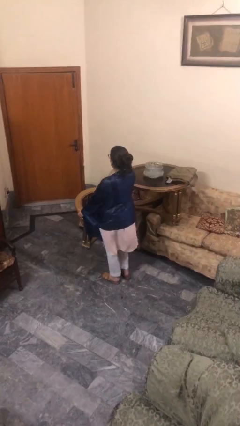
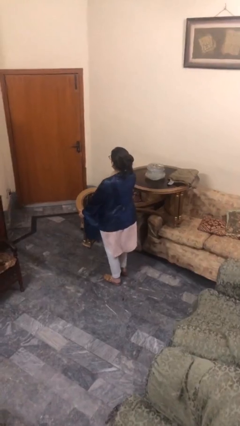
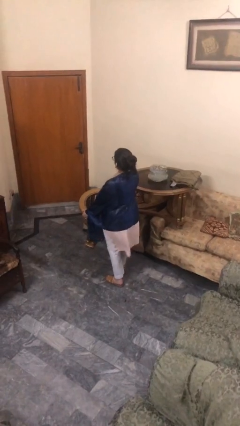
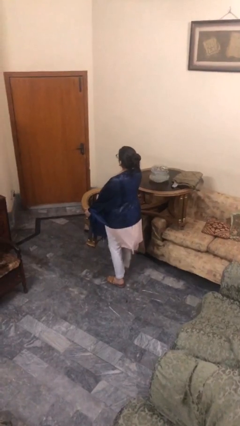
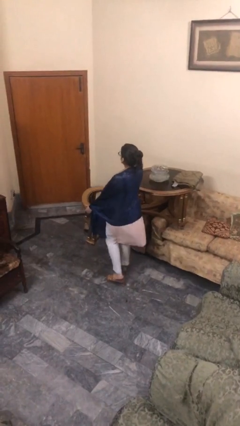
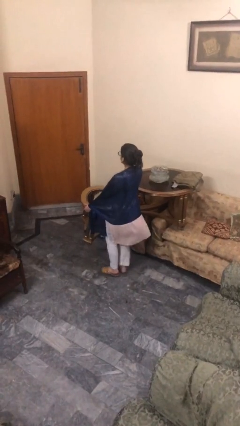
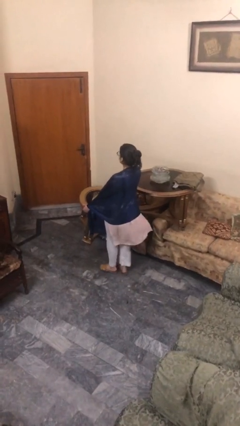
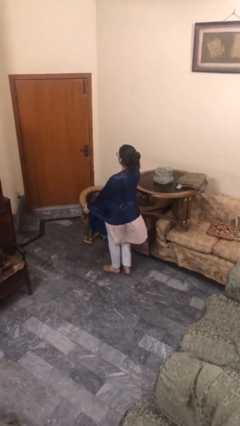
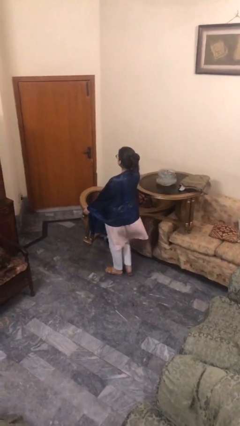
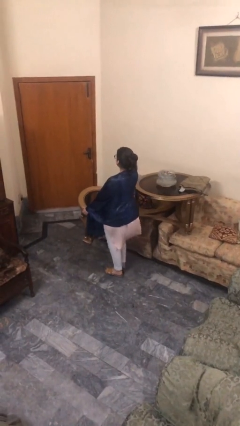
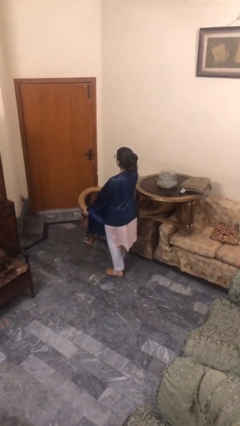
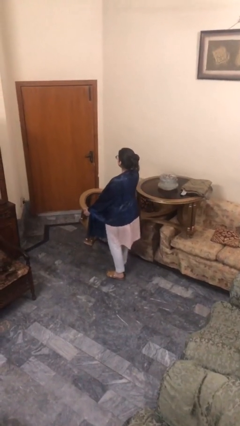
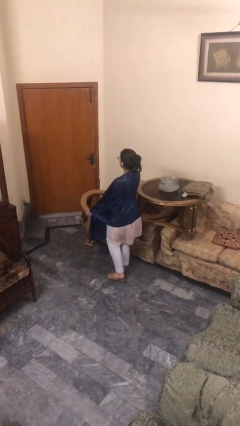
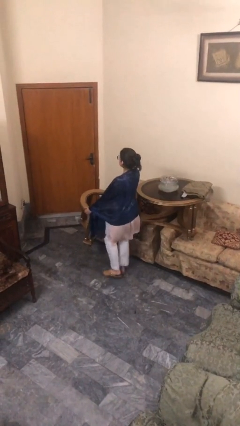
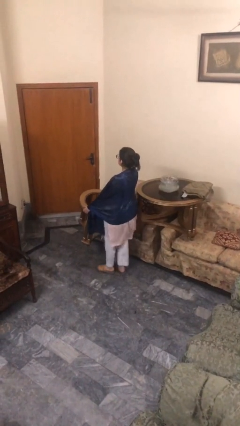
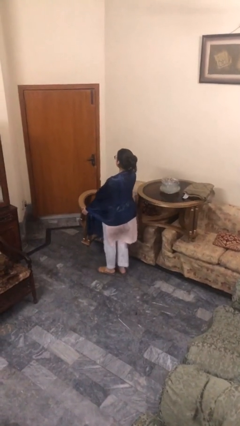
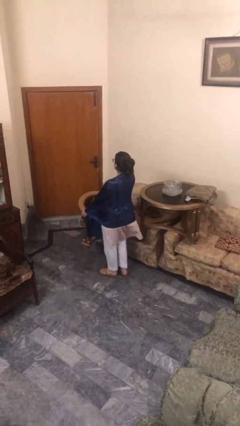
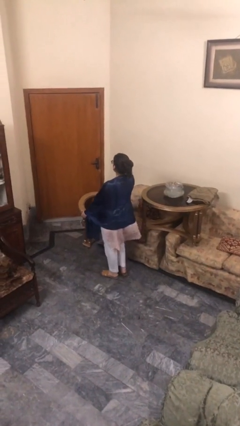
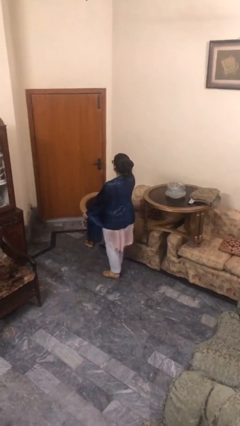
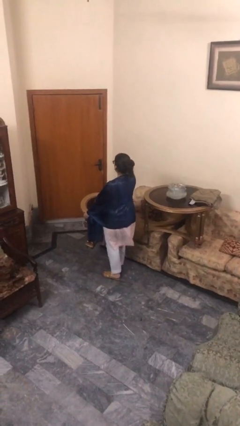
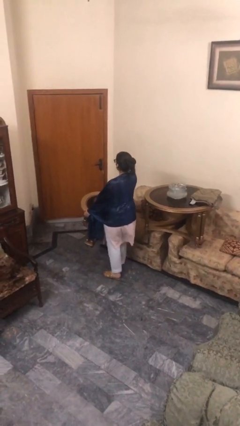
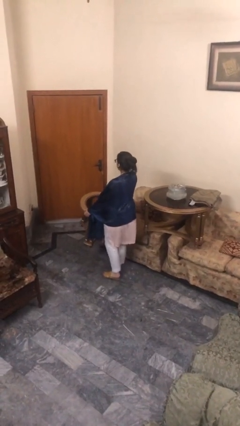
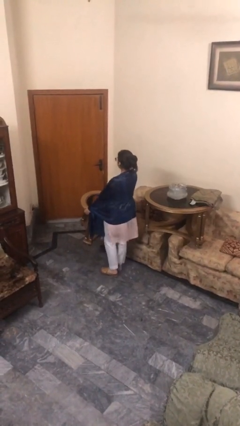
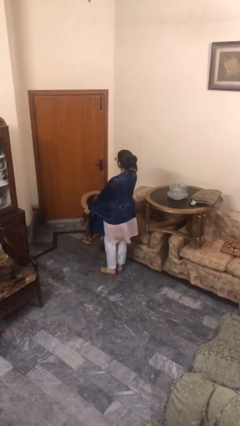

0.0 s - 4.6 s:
person carries furniture

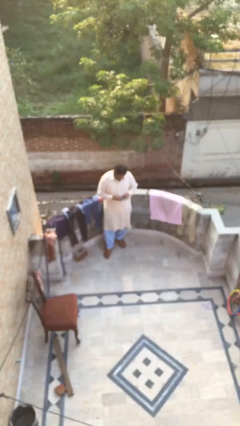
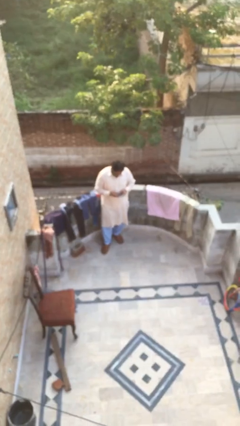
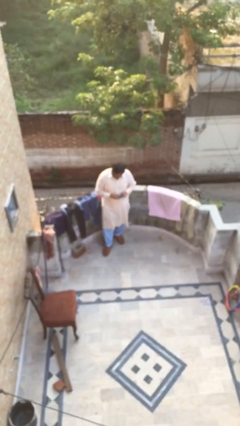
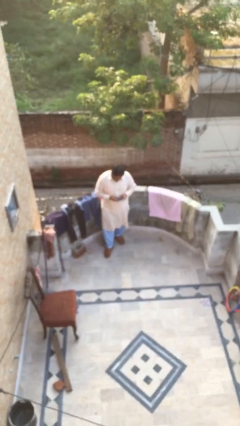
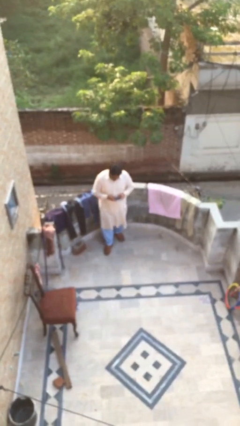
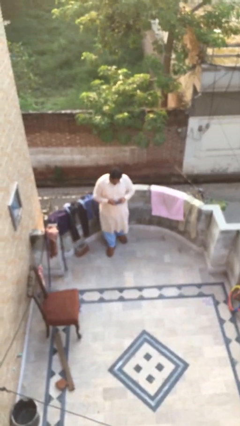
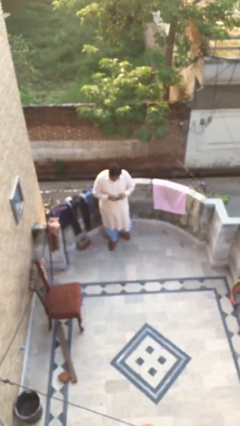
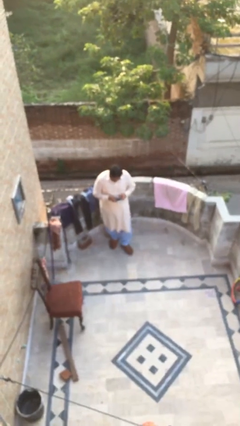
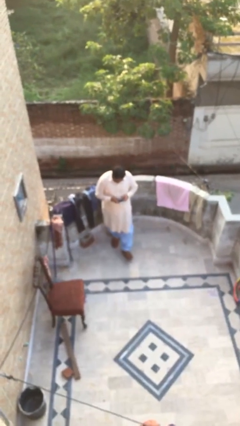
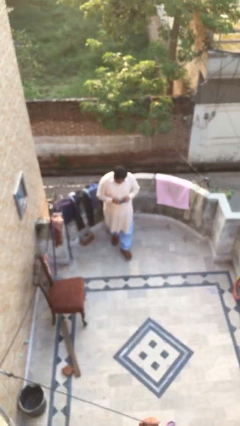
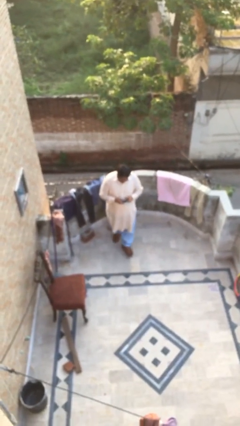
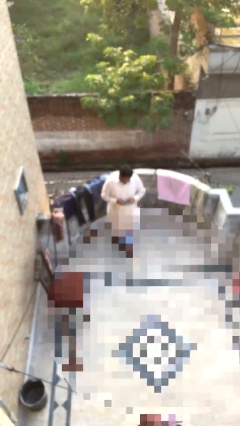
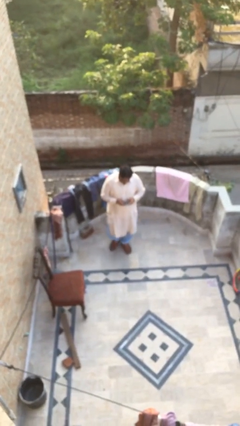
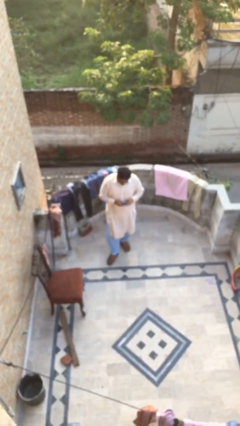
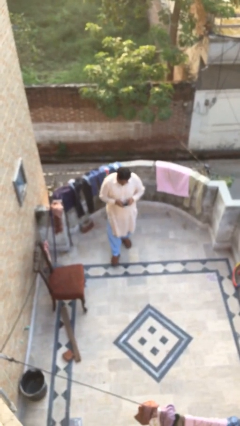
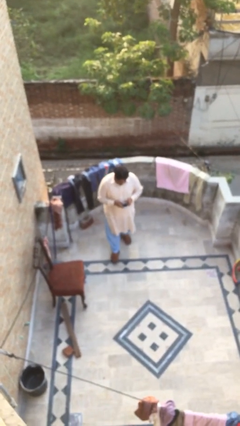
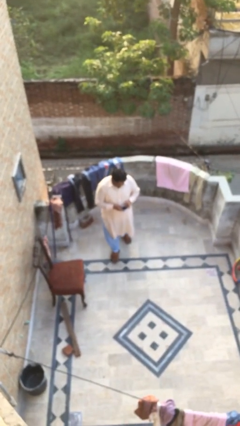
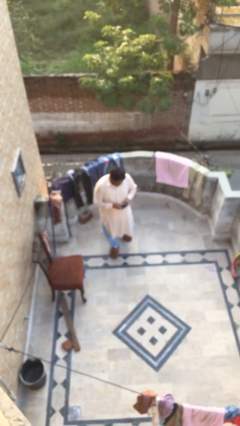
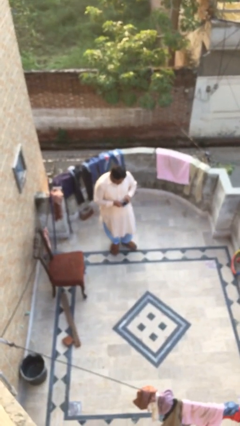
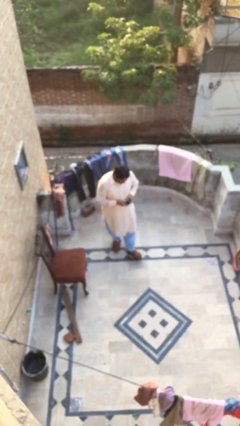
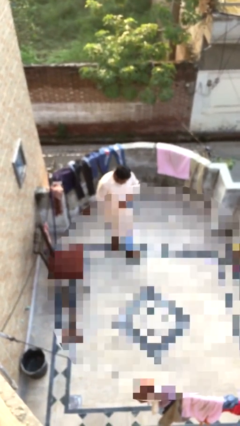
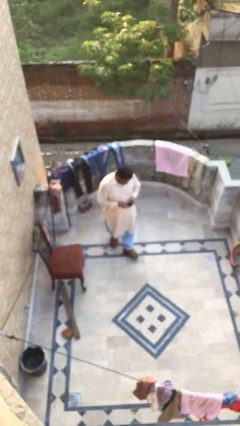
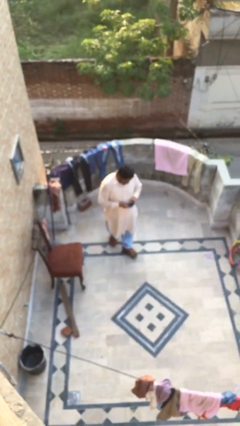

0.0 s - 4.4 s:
person texts on phone

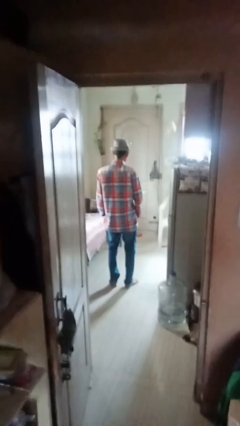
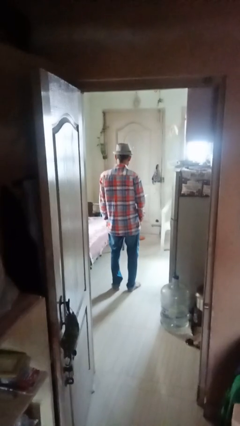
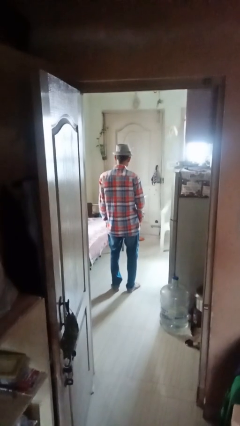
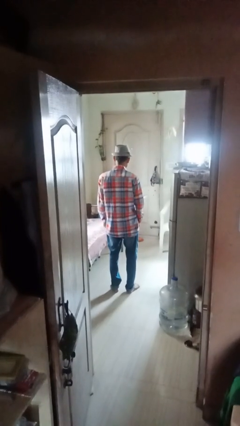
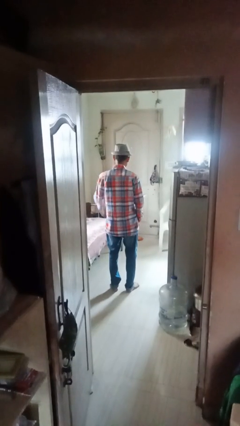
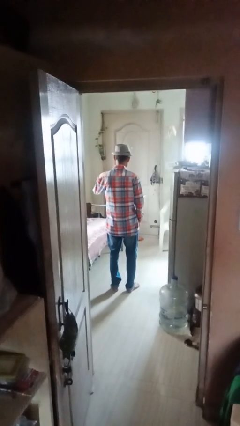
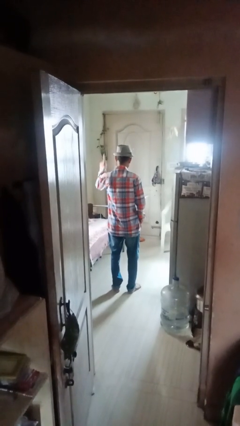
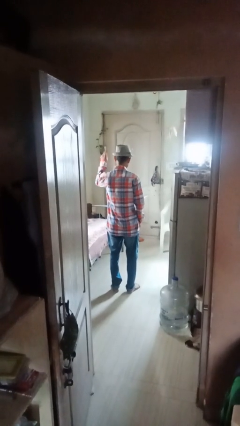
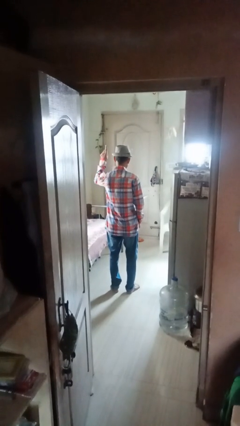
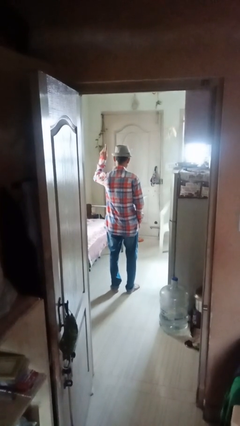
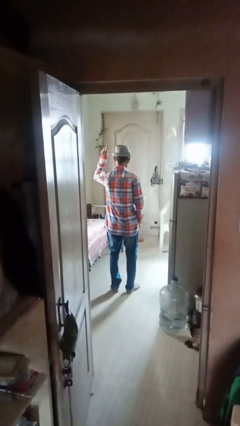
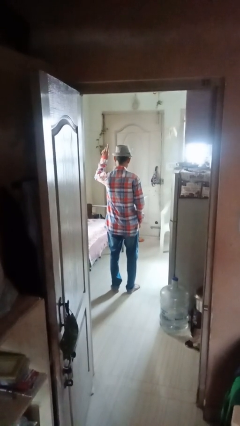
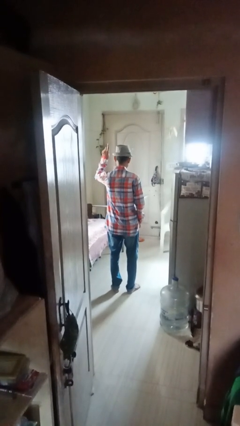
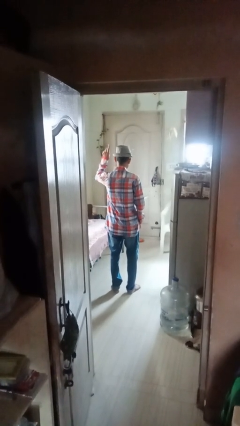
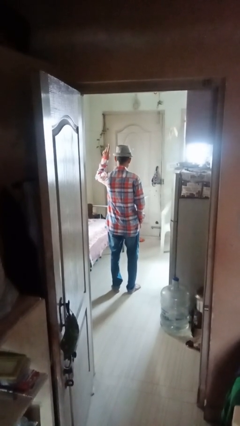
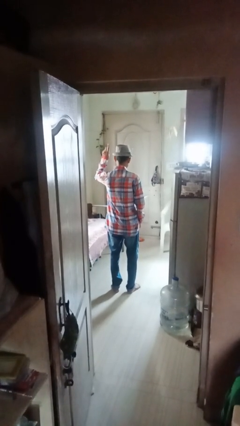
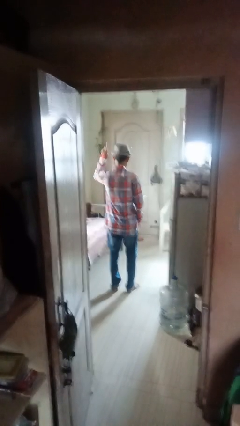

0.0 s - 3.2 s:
person gestures number one

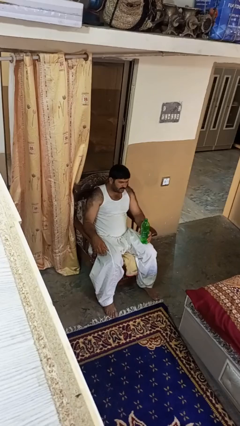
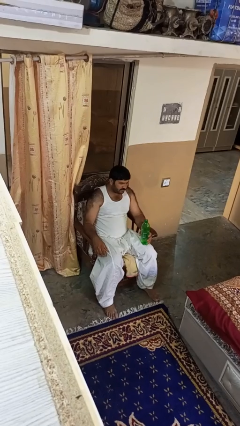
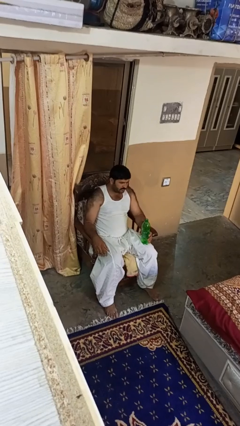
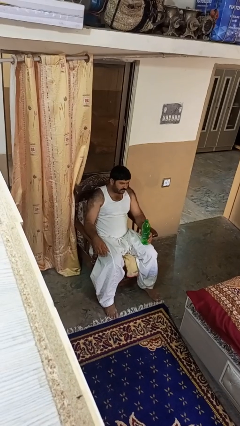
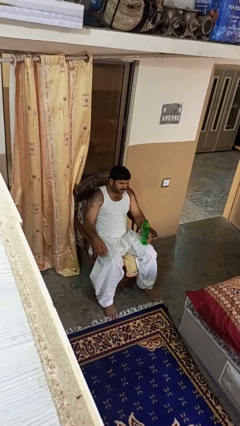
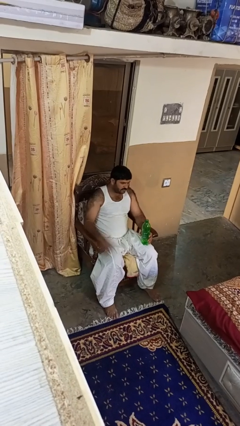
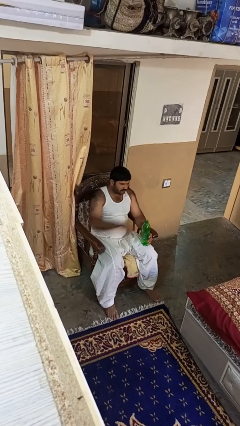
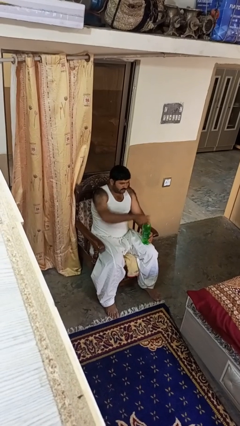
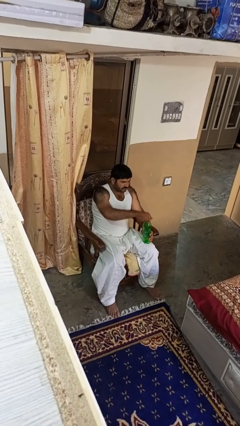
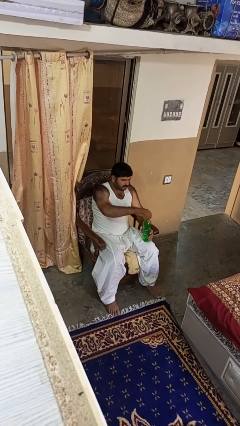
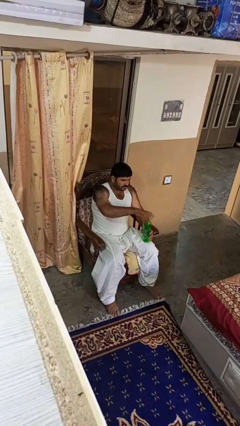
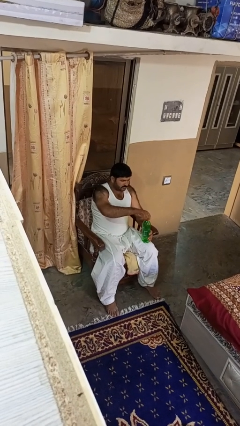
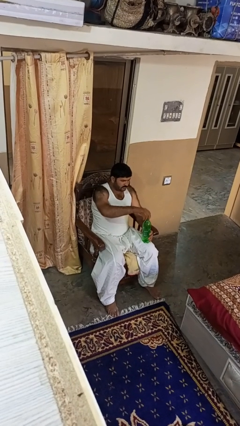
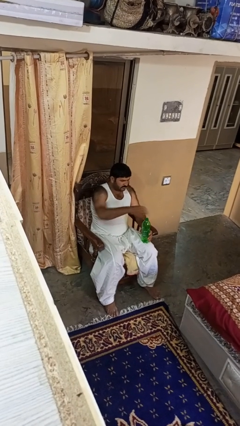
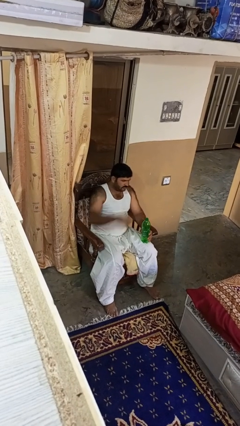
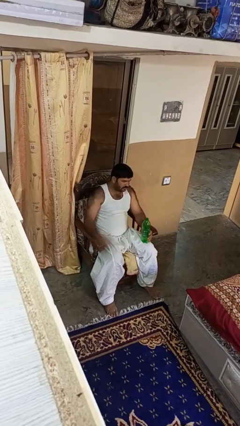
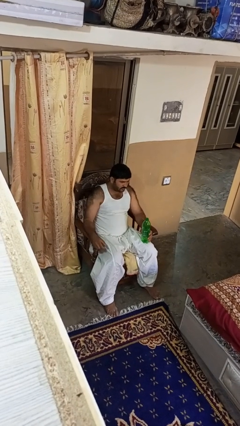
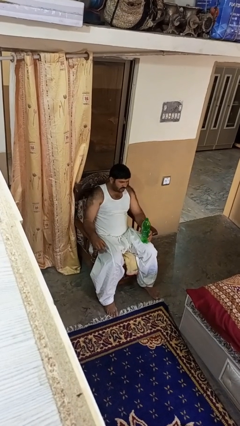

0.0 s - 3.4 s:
person unscrews lid from bottle

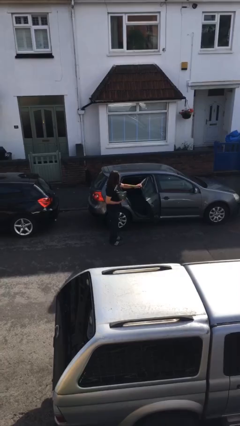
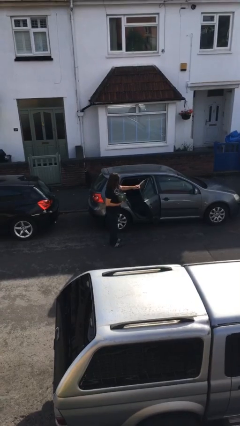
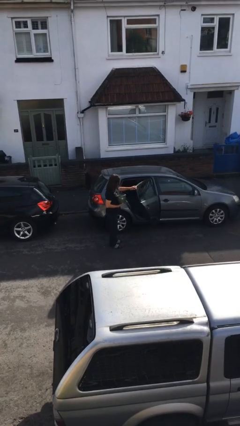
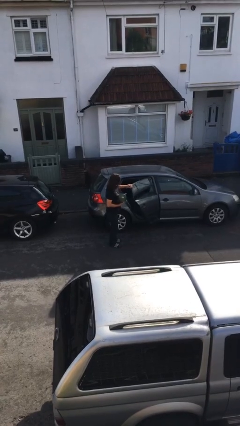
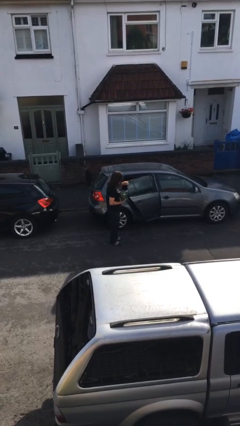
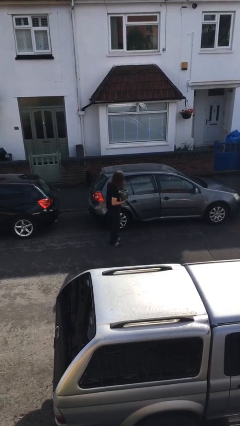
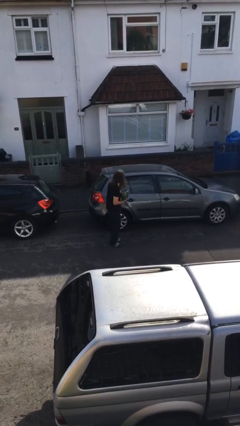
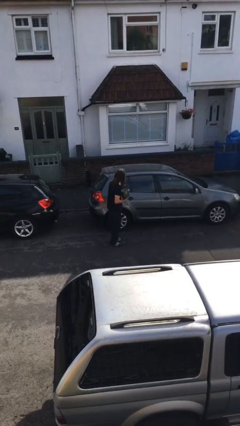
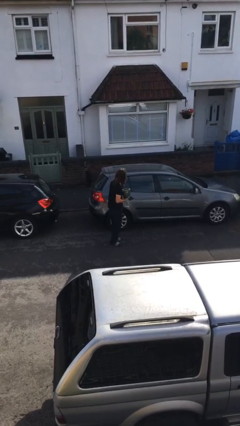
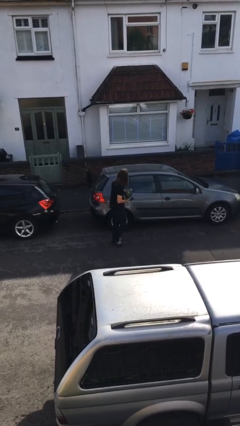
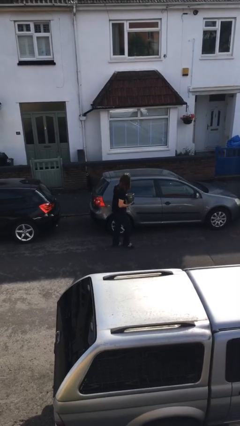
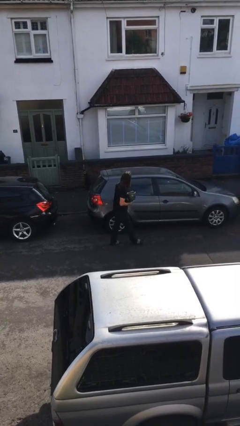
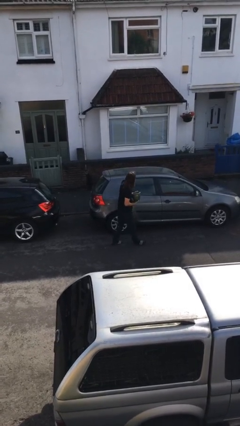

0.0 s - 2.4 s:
person closes car door
